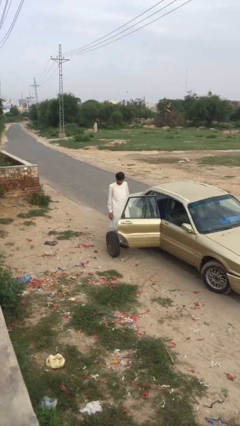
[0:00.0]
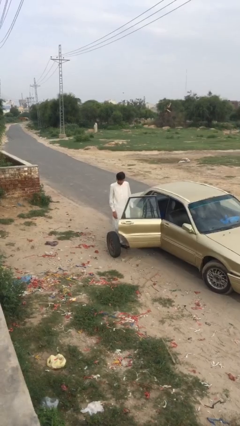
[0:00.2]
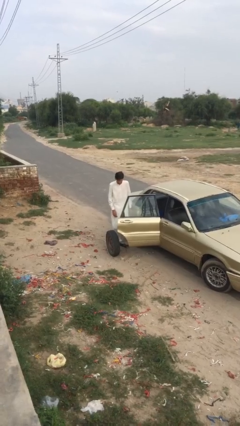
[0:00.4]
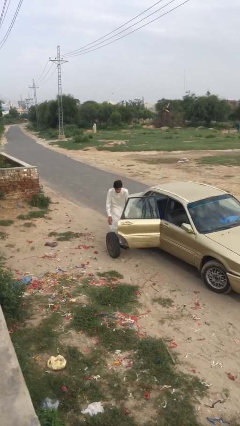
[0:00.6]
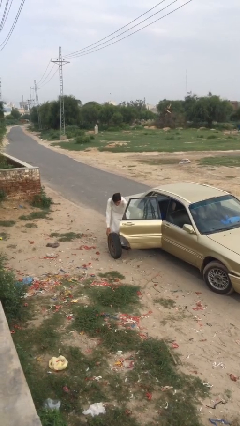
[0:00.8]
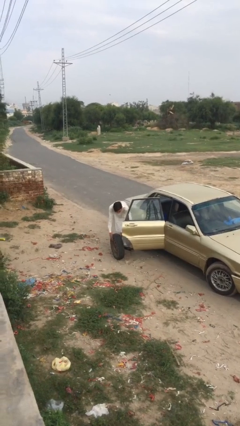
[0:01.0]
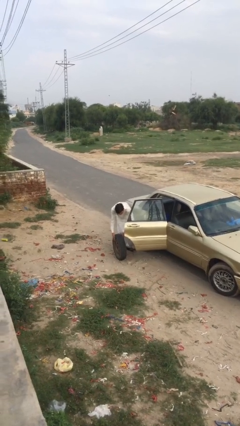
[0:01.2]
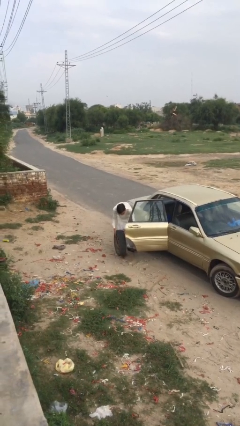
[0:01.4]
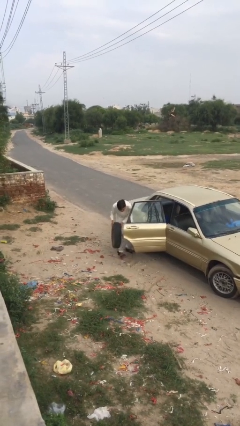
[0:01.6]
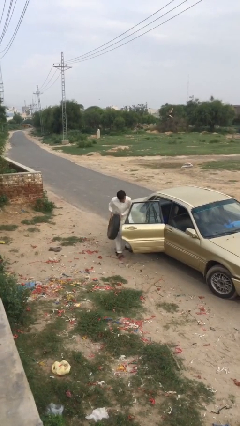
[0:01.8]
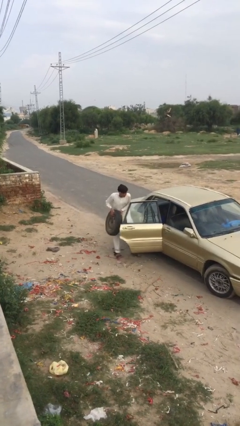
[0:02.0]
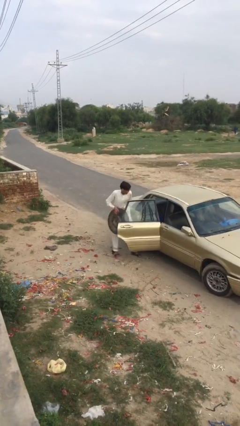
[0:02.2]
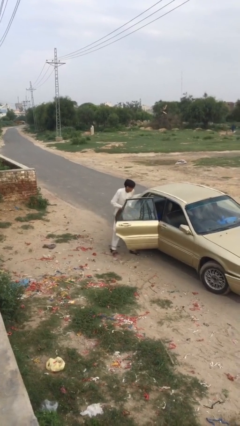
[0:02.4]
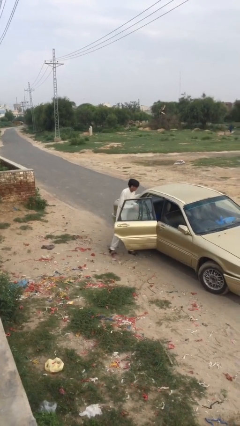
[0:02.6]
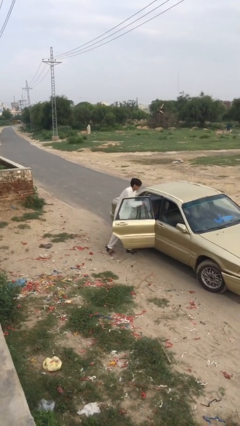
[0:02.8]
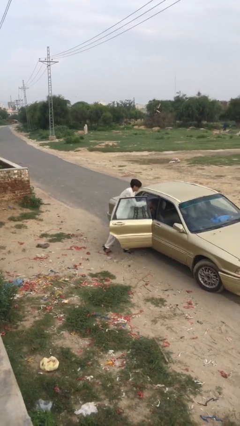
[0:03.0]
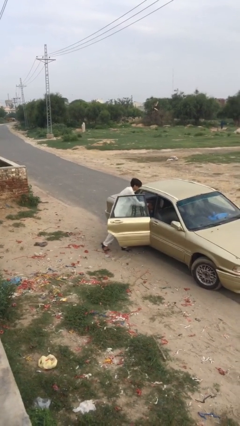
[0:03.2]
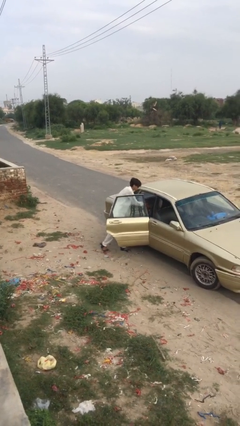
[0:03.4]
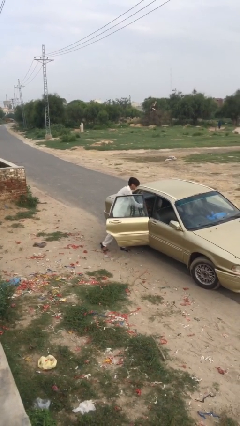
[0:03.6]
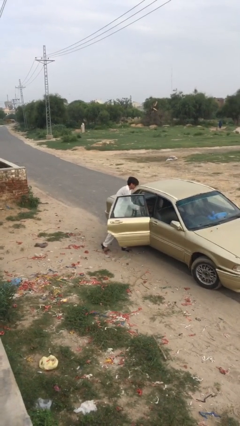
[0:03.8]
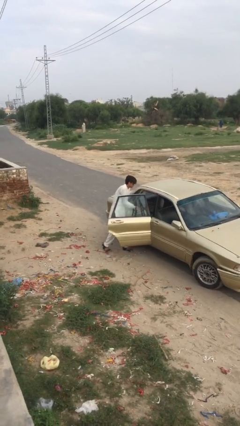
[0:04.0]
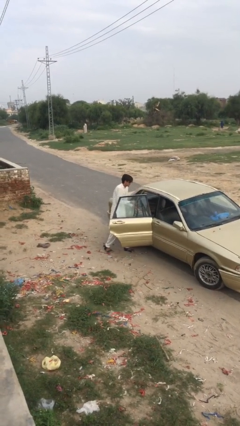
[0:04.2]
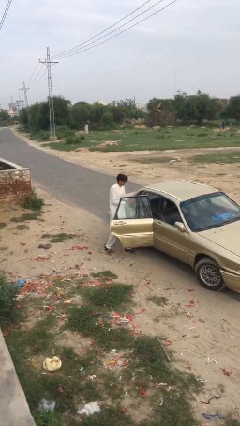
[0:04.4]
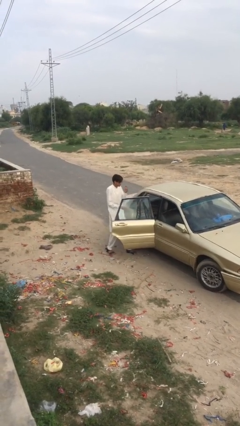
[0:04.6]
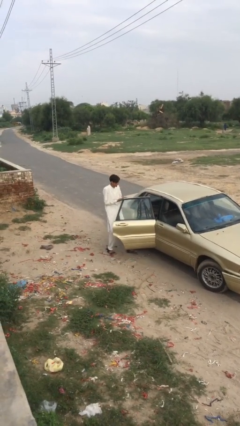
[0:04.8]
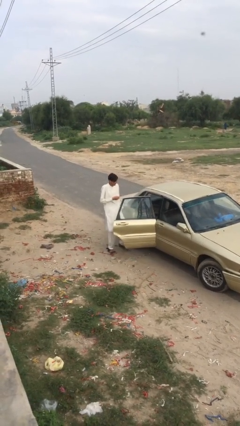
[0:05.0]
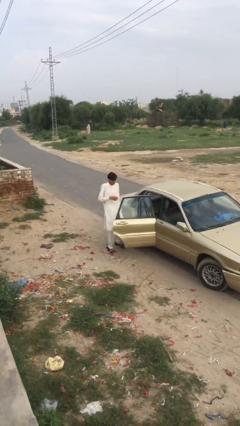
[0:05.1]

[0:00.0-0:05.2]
person loads car

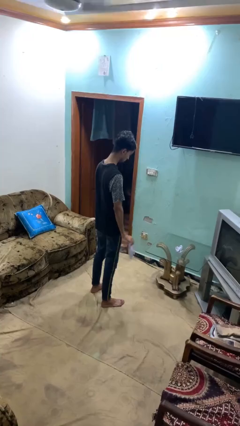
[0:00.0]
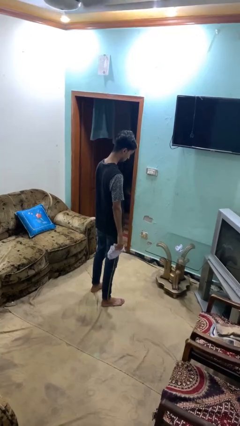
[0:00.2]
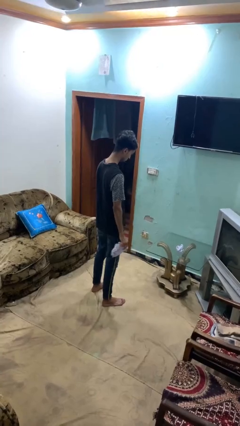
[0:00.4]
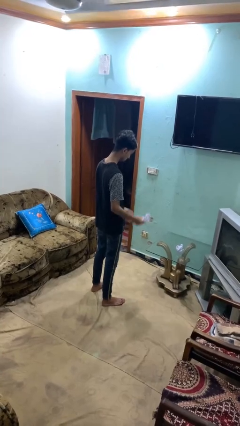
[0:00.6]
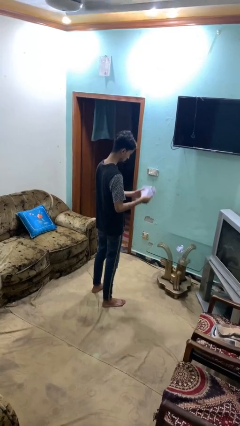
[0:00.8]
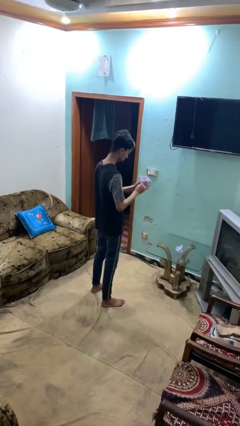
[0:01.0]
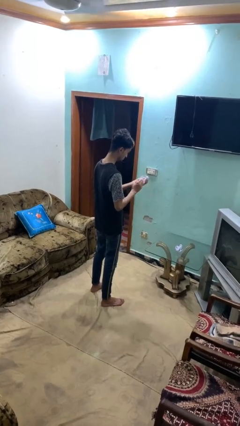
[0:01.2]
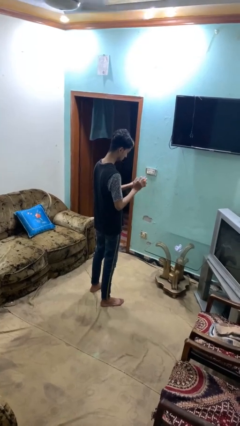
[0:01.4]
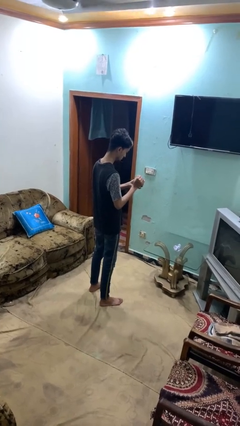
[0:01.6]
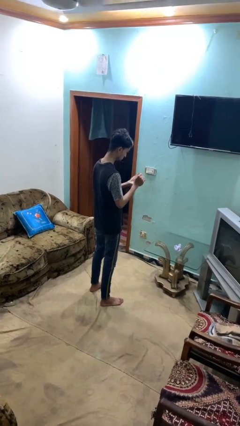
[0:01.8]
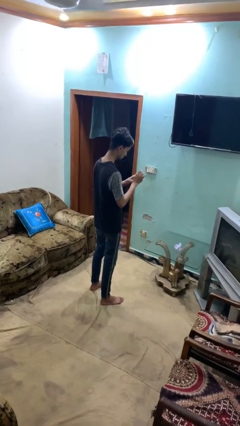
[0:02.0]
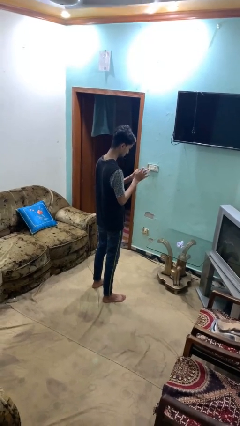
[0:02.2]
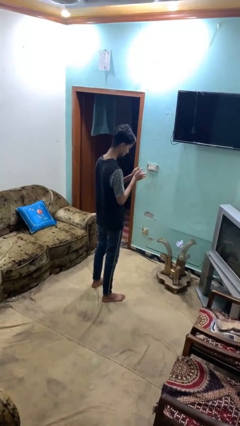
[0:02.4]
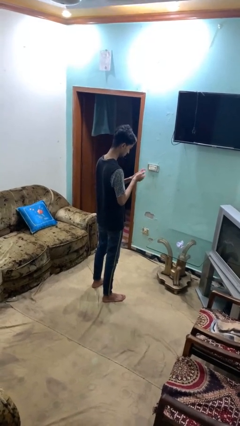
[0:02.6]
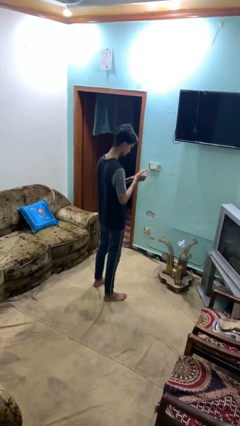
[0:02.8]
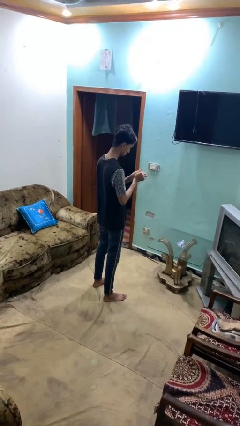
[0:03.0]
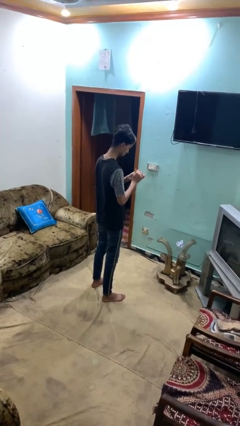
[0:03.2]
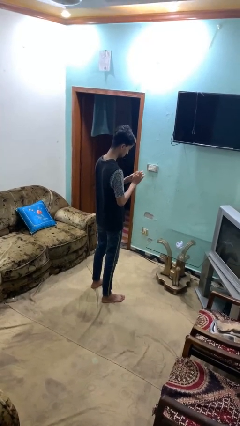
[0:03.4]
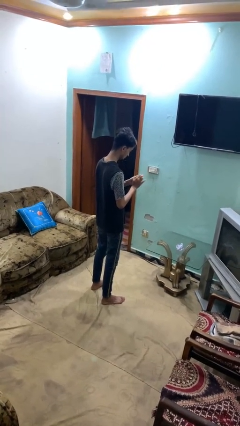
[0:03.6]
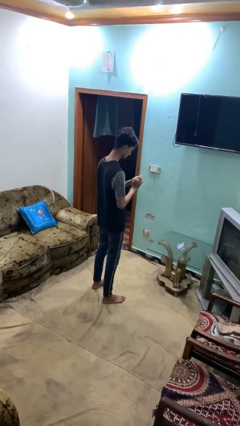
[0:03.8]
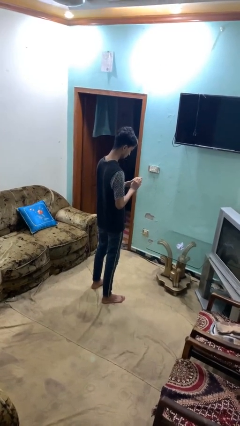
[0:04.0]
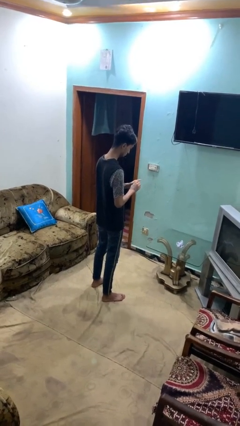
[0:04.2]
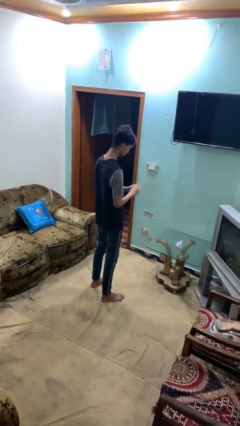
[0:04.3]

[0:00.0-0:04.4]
person crumples paper

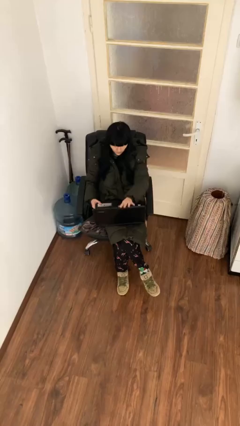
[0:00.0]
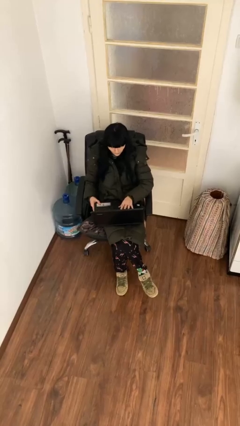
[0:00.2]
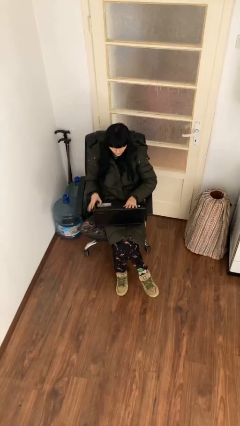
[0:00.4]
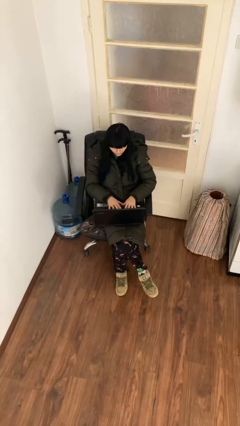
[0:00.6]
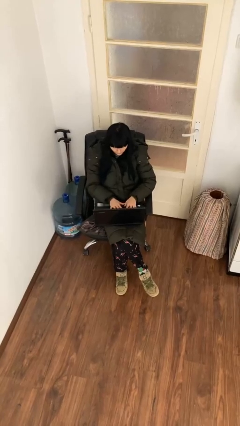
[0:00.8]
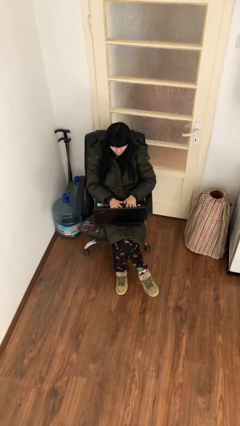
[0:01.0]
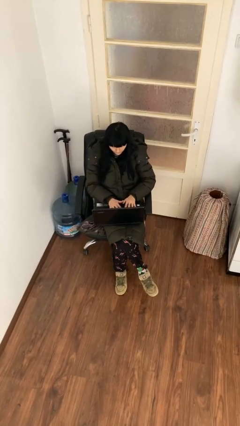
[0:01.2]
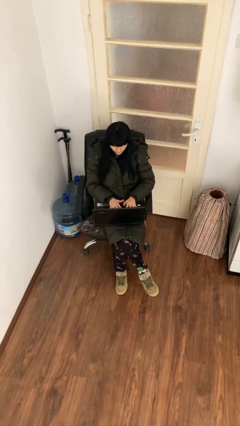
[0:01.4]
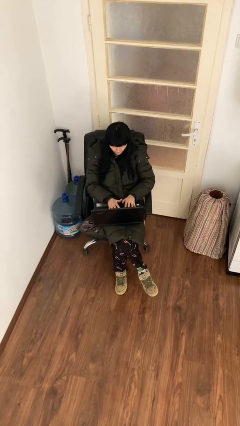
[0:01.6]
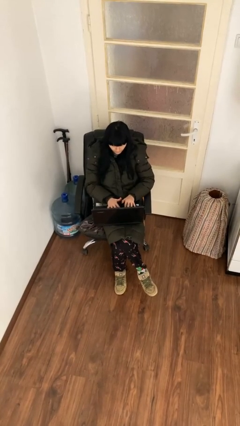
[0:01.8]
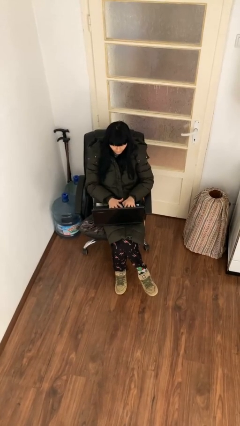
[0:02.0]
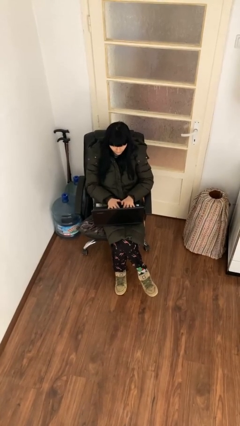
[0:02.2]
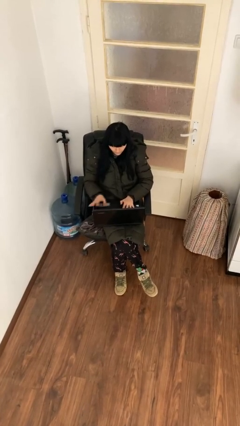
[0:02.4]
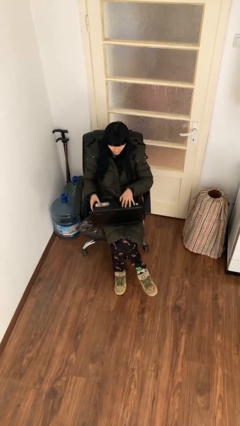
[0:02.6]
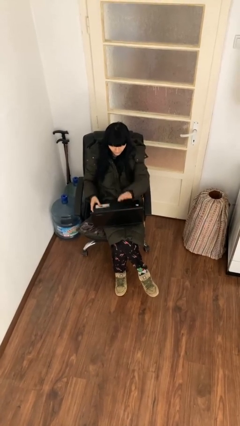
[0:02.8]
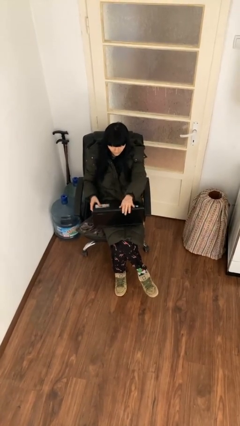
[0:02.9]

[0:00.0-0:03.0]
person interacts with laptop

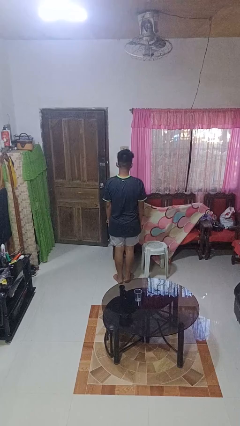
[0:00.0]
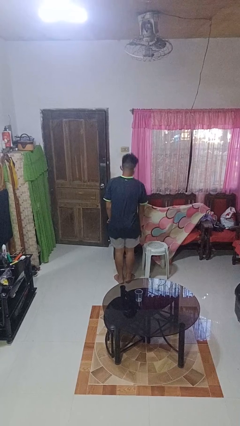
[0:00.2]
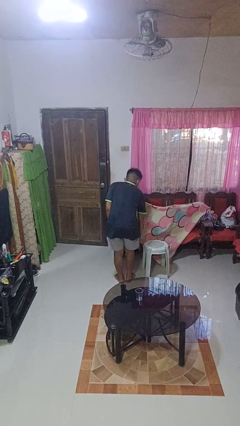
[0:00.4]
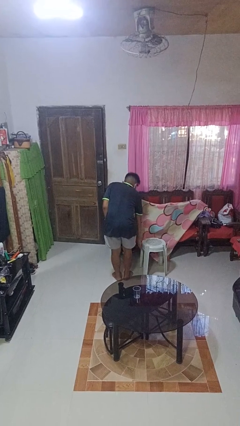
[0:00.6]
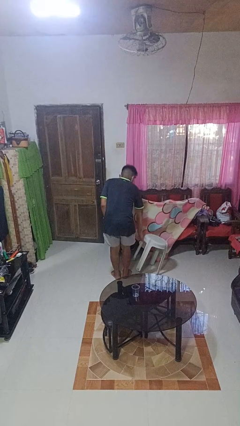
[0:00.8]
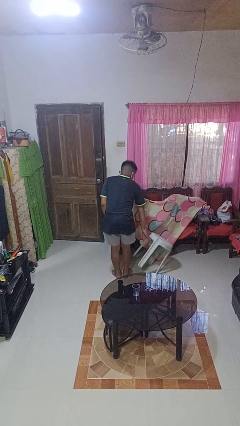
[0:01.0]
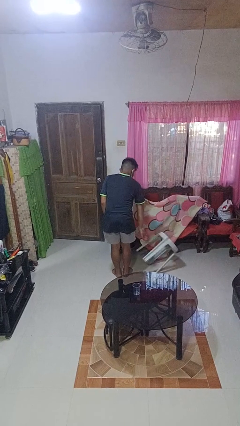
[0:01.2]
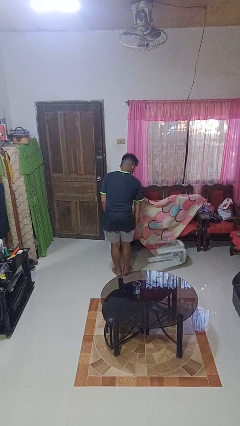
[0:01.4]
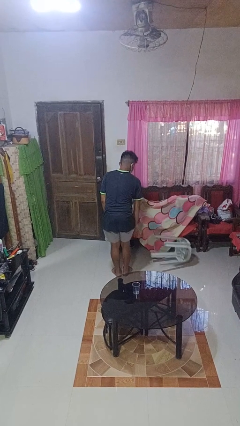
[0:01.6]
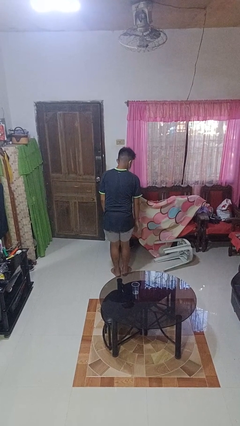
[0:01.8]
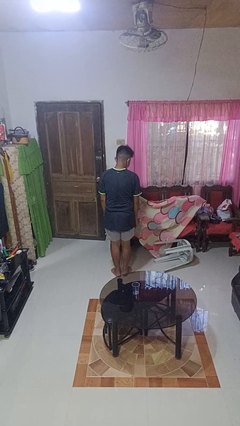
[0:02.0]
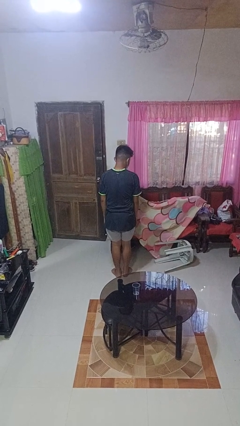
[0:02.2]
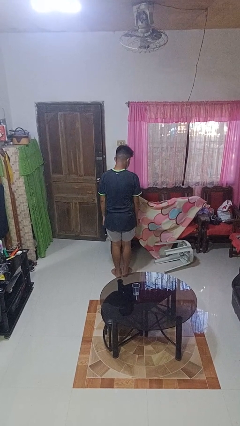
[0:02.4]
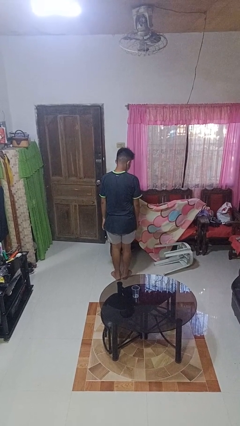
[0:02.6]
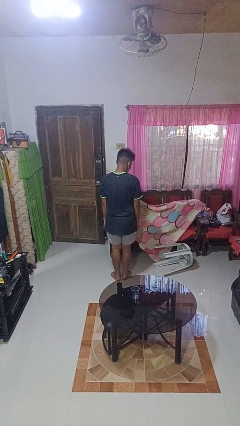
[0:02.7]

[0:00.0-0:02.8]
person knocks over furniture

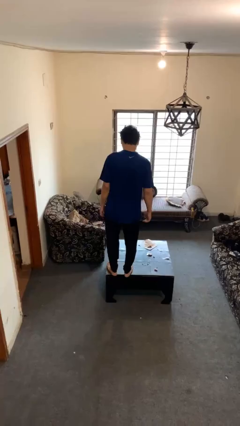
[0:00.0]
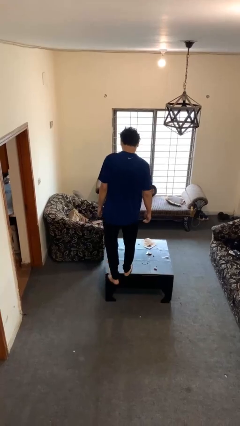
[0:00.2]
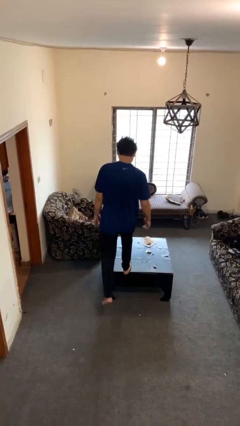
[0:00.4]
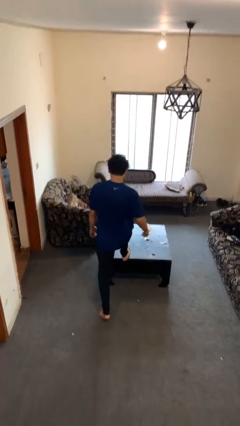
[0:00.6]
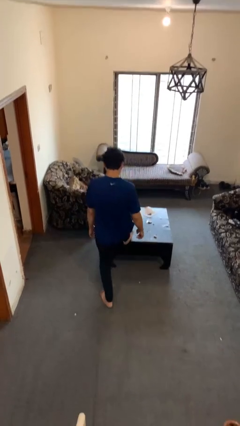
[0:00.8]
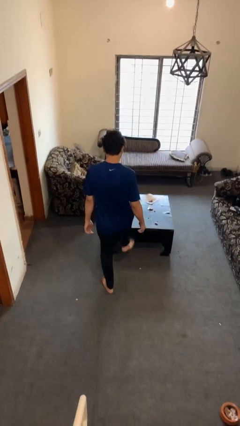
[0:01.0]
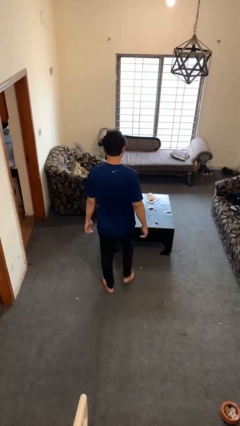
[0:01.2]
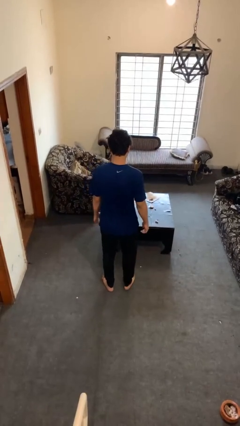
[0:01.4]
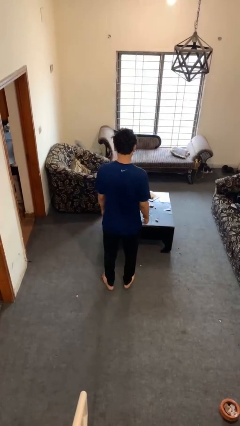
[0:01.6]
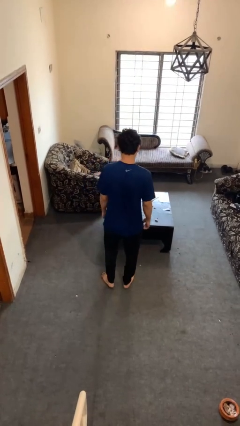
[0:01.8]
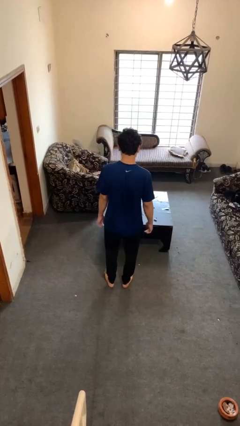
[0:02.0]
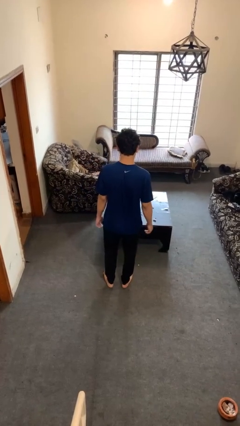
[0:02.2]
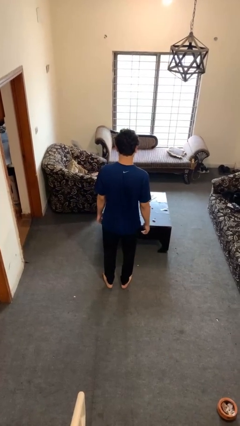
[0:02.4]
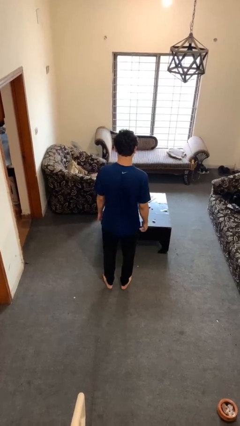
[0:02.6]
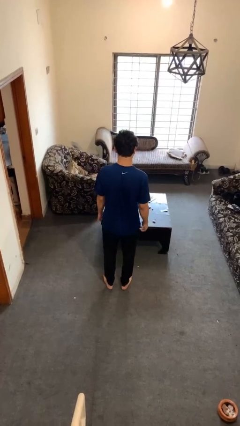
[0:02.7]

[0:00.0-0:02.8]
person climbs off table
